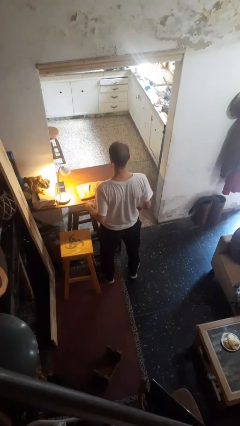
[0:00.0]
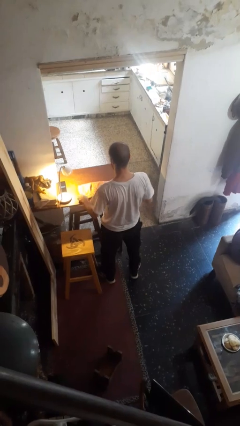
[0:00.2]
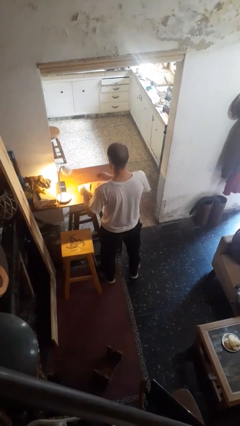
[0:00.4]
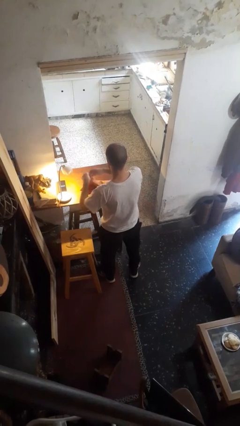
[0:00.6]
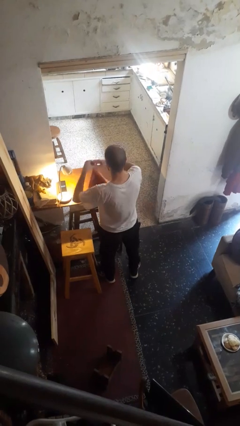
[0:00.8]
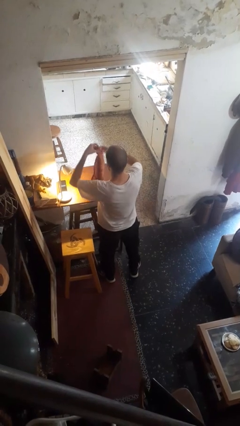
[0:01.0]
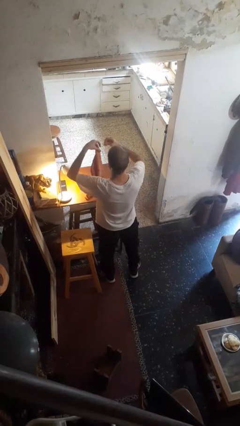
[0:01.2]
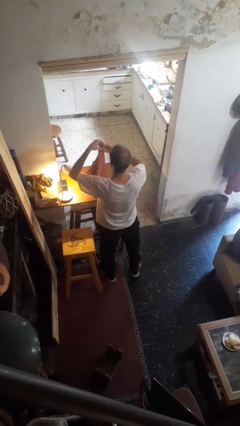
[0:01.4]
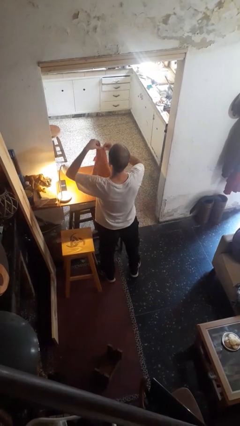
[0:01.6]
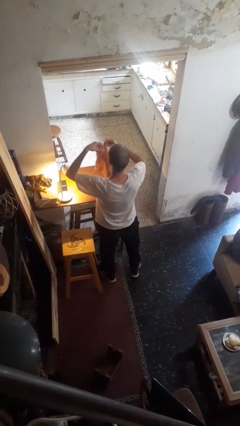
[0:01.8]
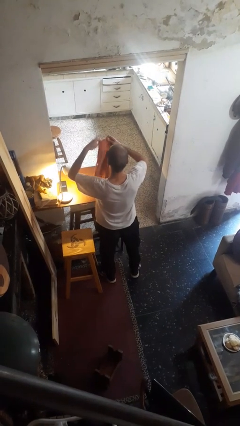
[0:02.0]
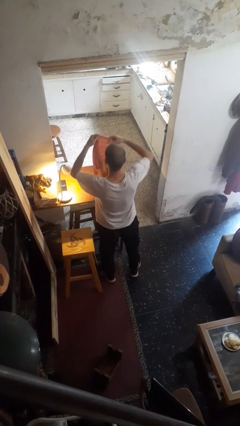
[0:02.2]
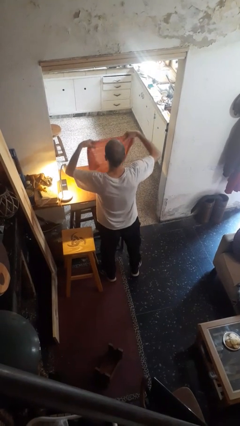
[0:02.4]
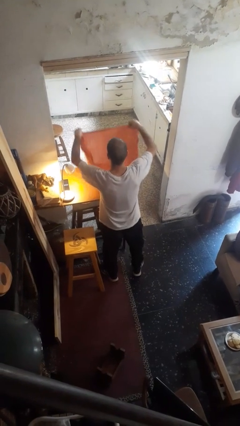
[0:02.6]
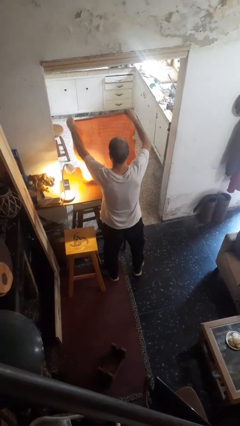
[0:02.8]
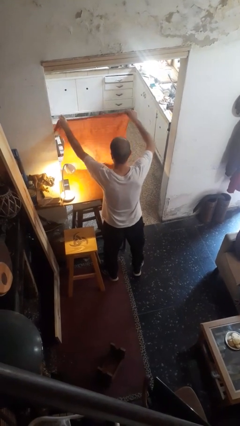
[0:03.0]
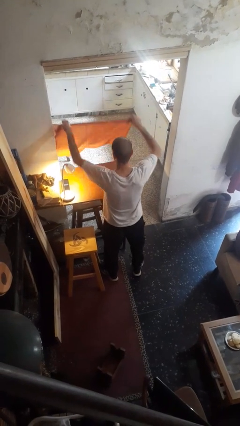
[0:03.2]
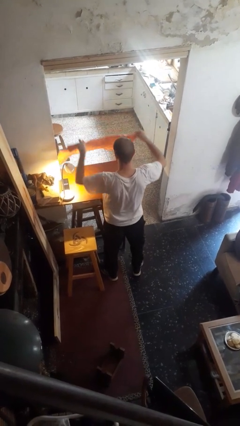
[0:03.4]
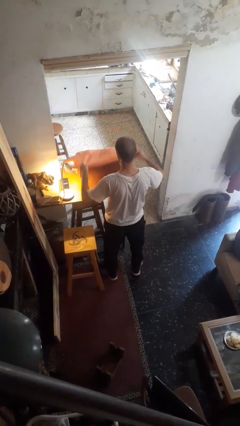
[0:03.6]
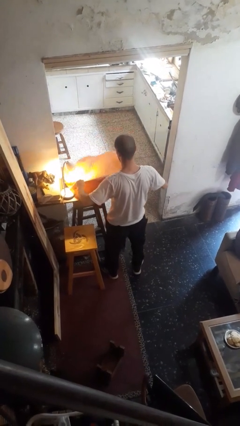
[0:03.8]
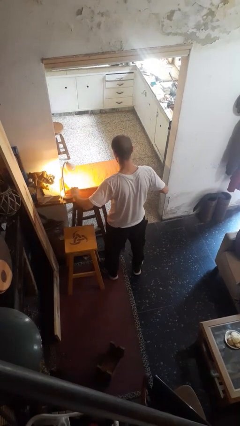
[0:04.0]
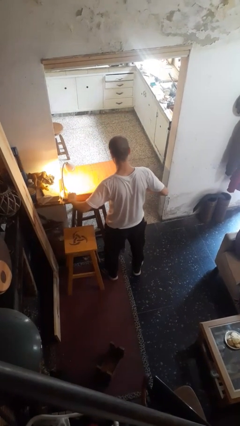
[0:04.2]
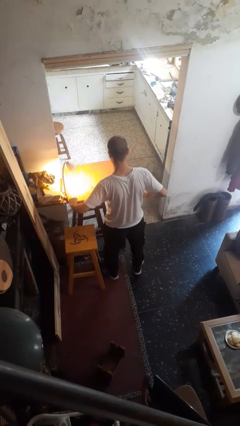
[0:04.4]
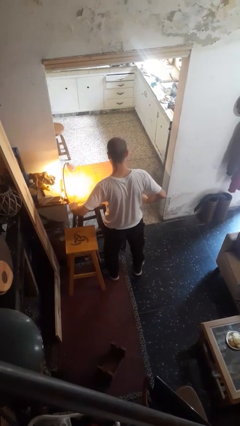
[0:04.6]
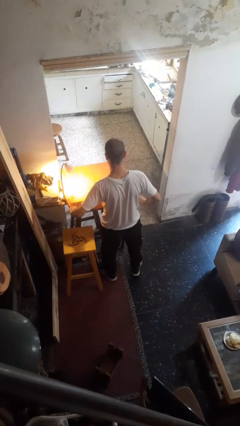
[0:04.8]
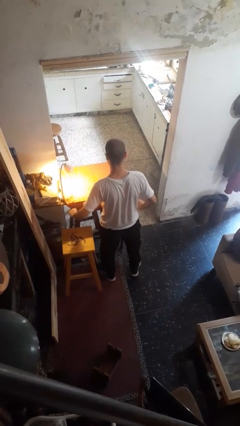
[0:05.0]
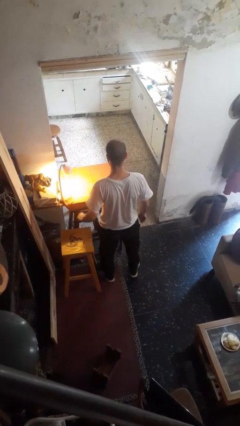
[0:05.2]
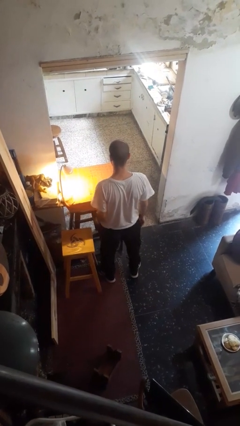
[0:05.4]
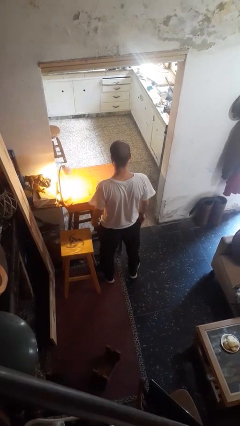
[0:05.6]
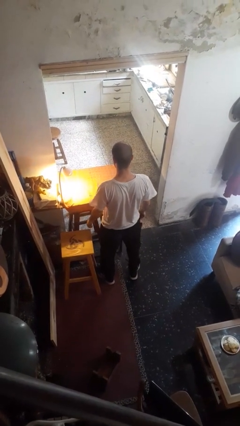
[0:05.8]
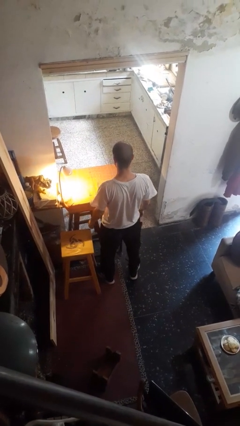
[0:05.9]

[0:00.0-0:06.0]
person spreads tablecloth

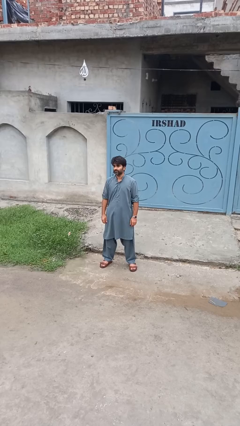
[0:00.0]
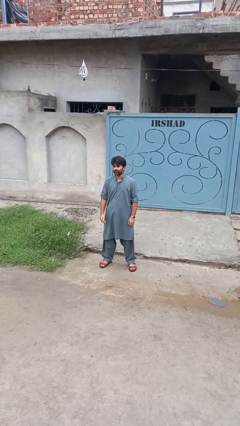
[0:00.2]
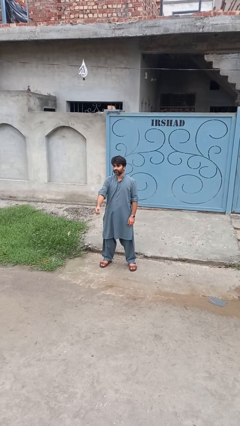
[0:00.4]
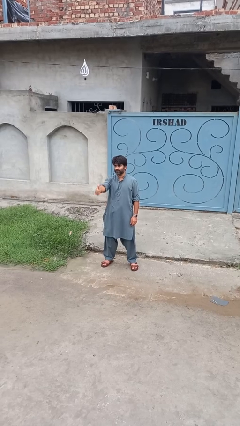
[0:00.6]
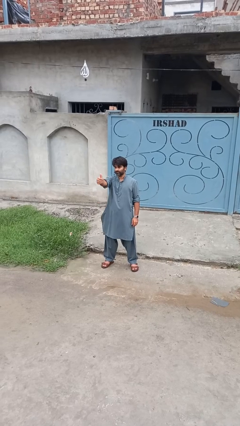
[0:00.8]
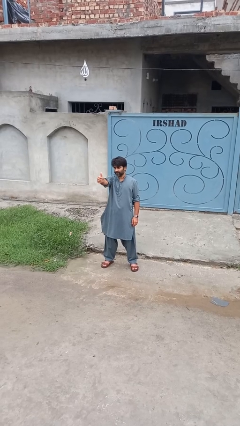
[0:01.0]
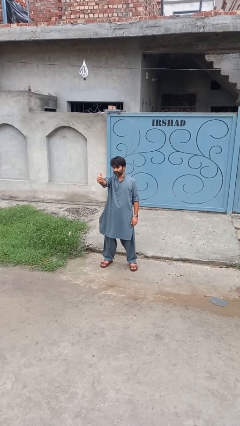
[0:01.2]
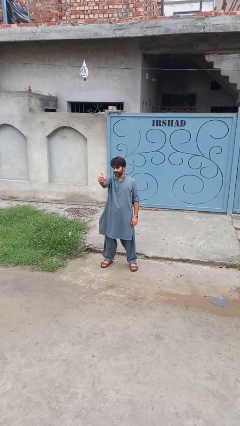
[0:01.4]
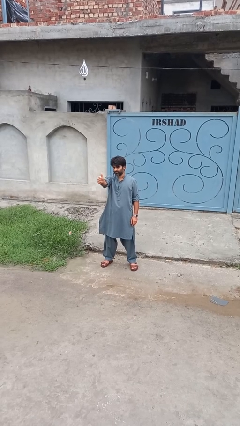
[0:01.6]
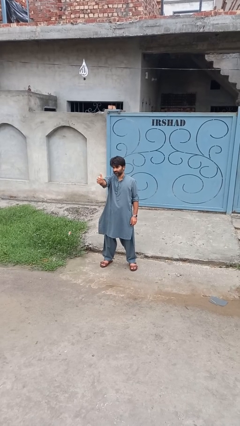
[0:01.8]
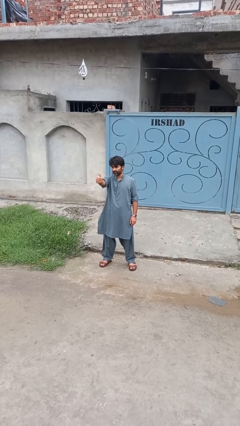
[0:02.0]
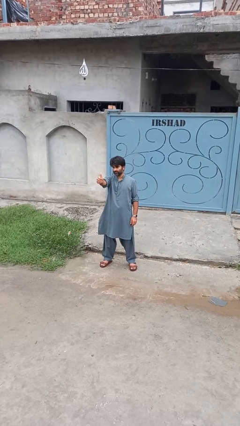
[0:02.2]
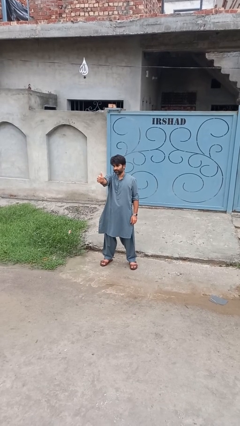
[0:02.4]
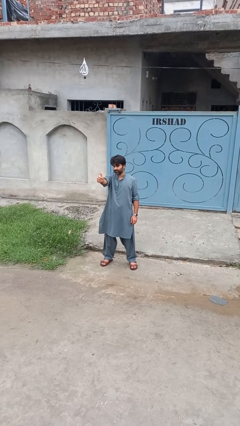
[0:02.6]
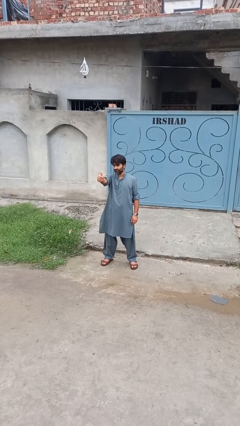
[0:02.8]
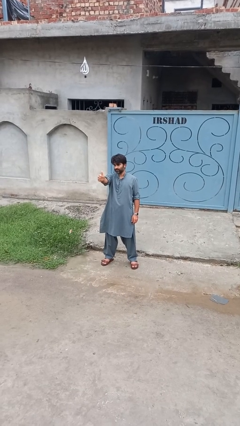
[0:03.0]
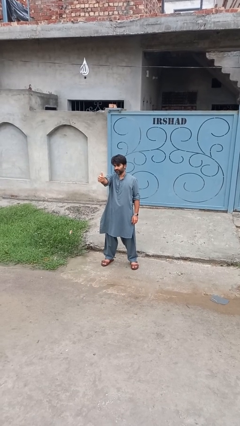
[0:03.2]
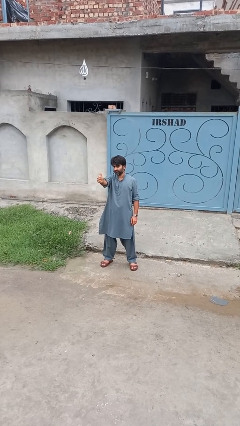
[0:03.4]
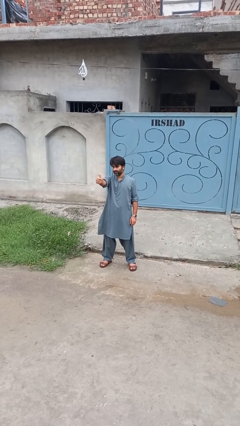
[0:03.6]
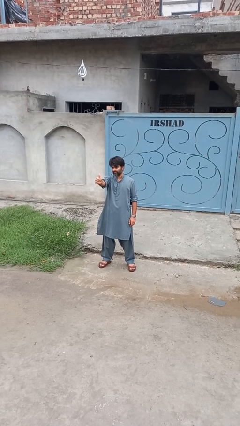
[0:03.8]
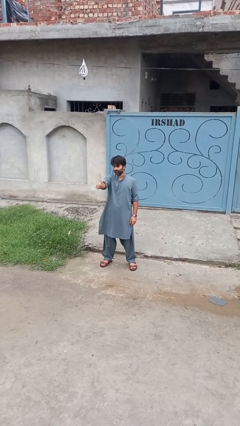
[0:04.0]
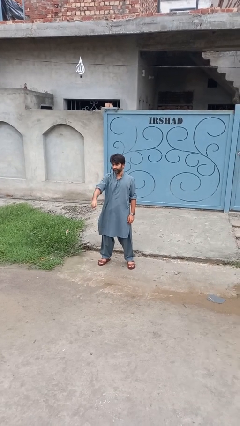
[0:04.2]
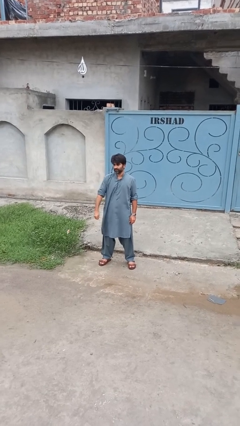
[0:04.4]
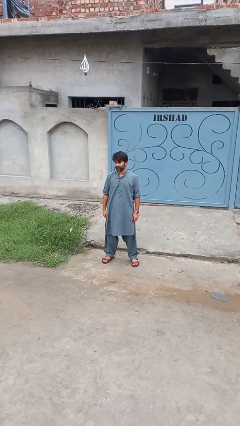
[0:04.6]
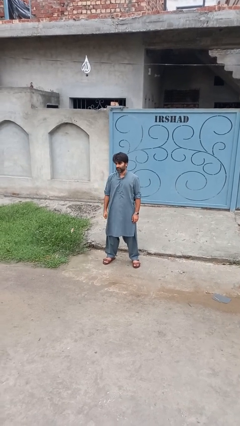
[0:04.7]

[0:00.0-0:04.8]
person gestures thumbs up

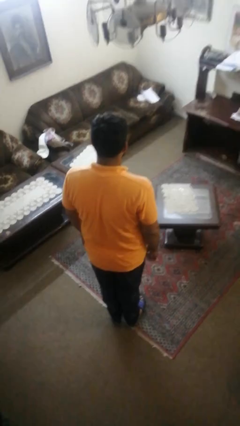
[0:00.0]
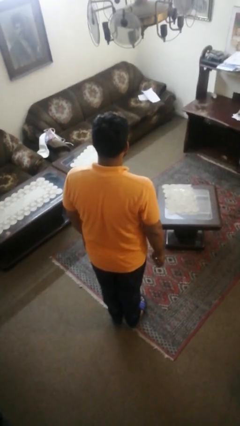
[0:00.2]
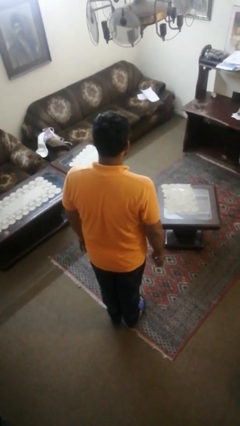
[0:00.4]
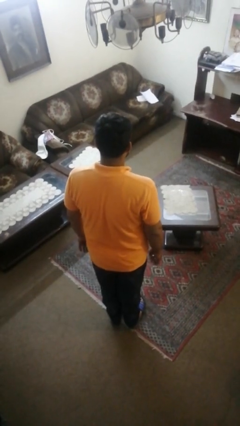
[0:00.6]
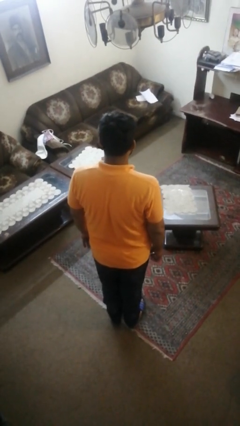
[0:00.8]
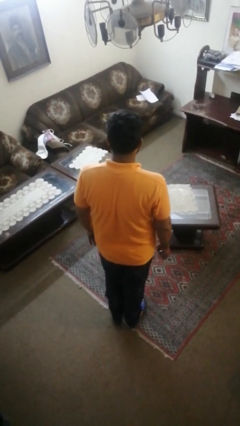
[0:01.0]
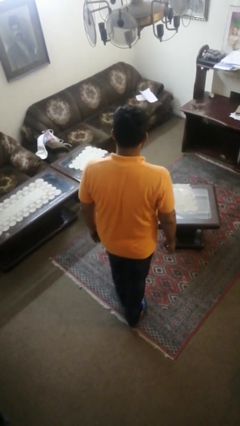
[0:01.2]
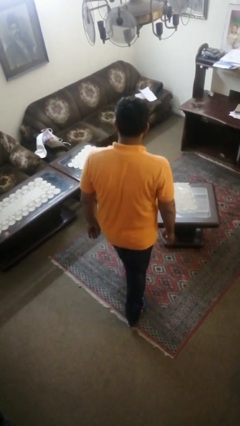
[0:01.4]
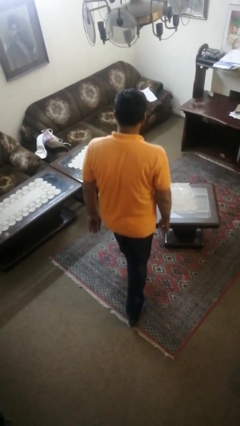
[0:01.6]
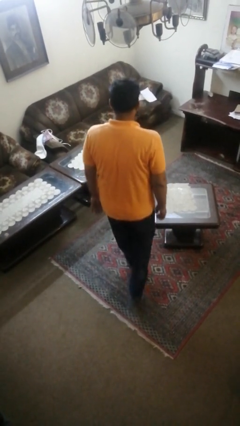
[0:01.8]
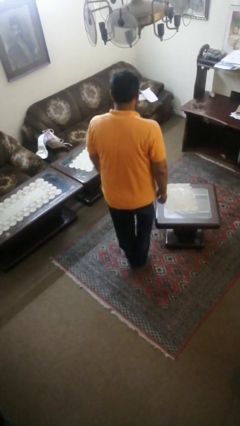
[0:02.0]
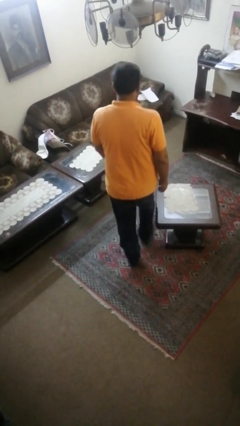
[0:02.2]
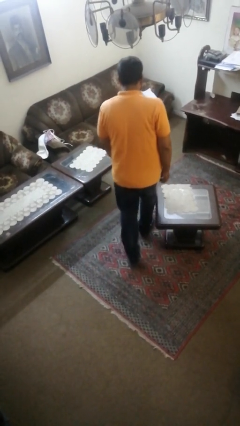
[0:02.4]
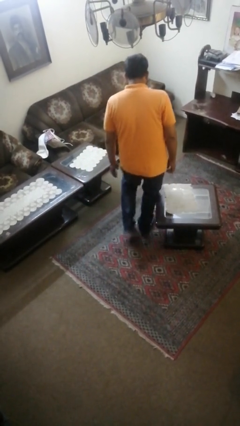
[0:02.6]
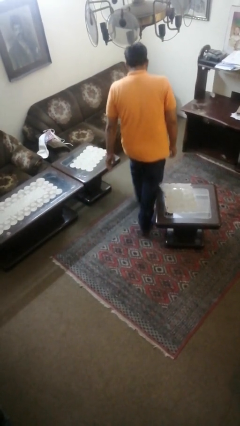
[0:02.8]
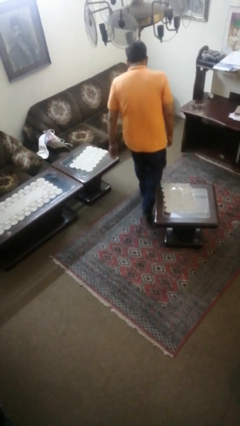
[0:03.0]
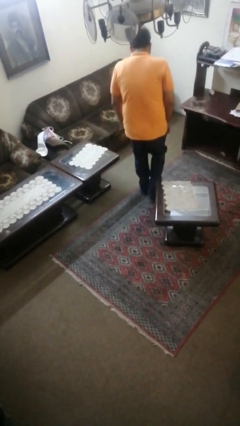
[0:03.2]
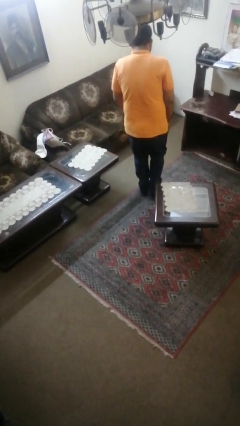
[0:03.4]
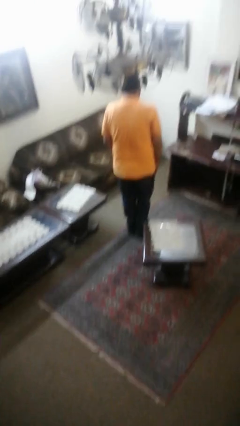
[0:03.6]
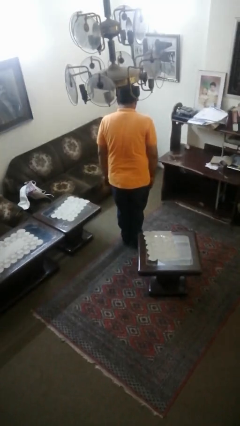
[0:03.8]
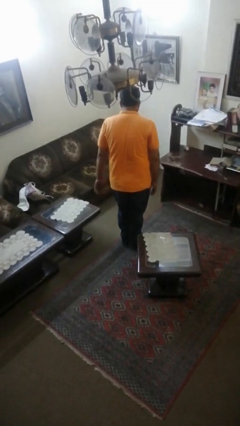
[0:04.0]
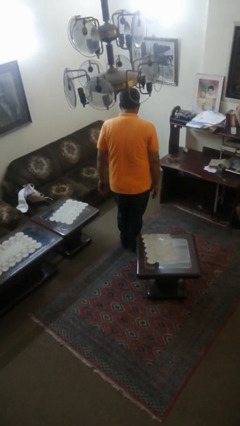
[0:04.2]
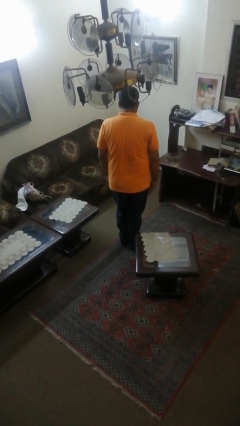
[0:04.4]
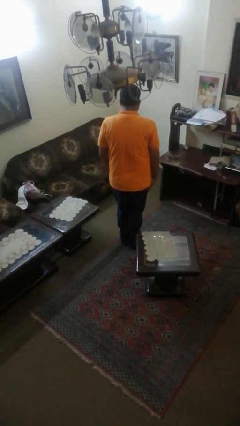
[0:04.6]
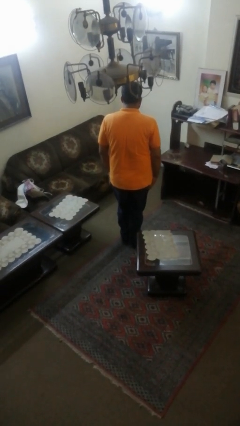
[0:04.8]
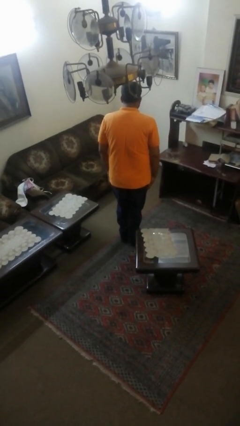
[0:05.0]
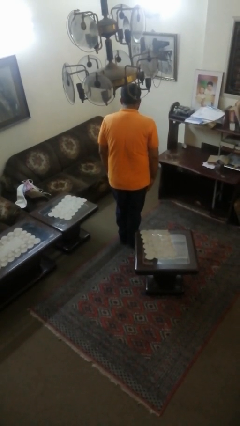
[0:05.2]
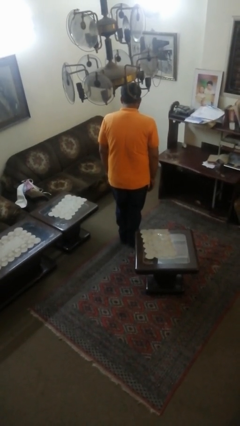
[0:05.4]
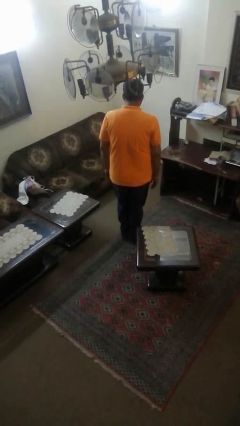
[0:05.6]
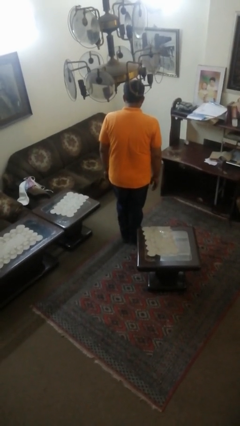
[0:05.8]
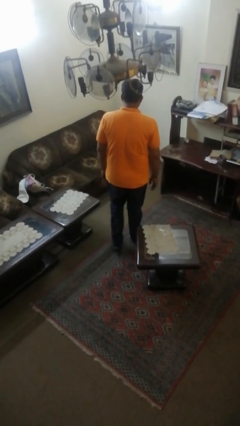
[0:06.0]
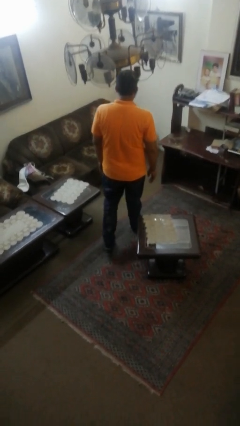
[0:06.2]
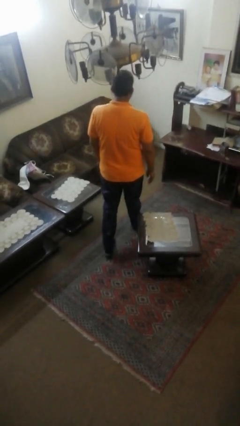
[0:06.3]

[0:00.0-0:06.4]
person bumps into table

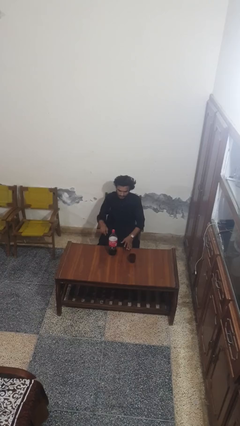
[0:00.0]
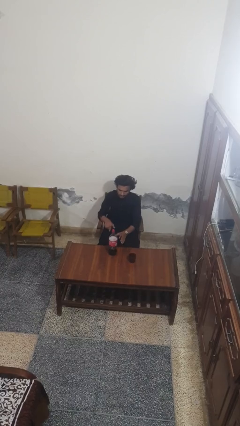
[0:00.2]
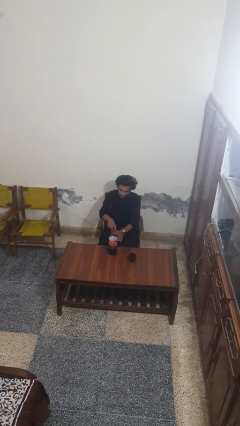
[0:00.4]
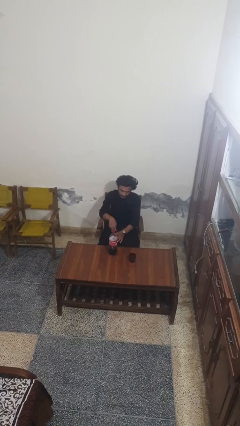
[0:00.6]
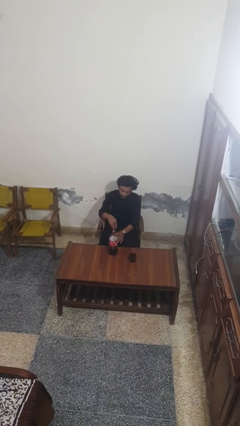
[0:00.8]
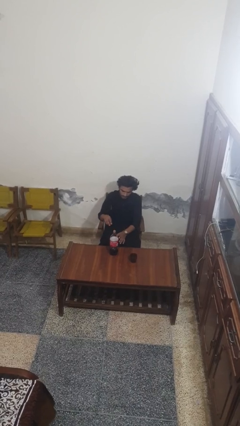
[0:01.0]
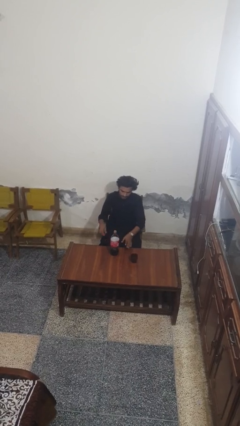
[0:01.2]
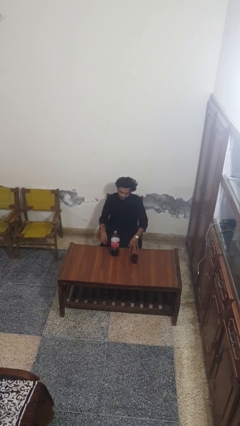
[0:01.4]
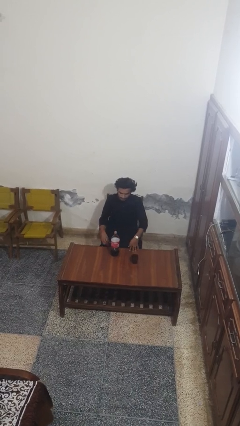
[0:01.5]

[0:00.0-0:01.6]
person unscrews lid from bottle
